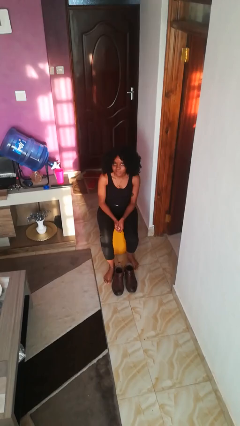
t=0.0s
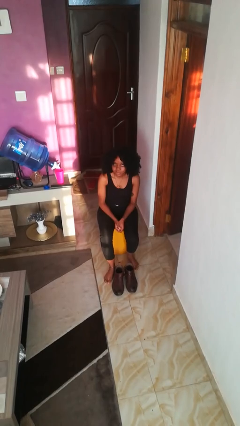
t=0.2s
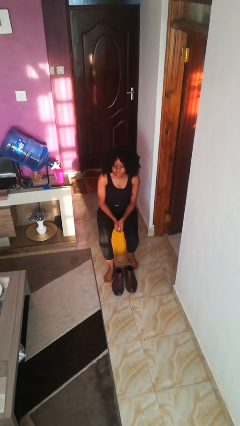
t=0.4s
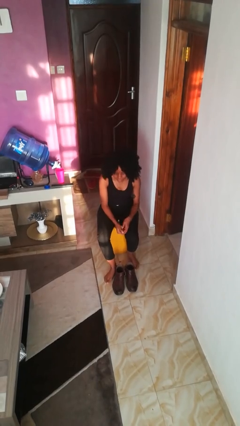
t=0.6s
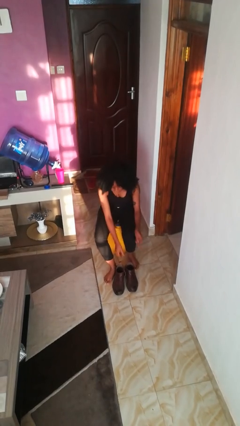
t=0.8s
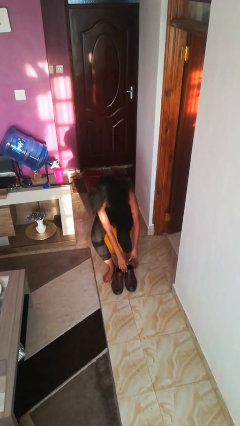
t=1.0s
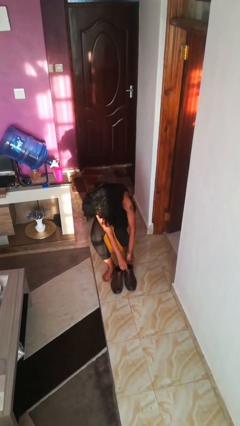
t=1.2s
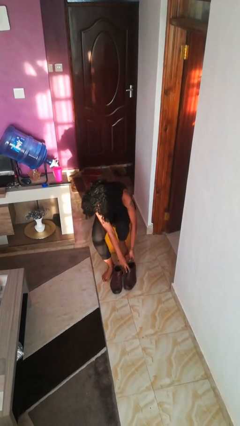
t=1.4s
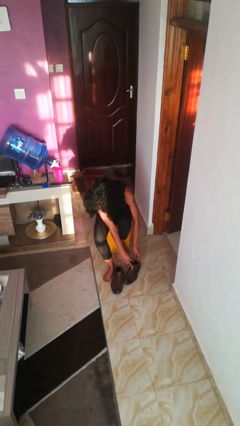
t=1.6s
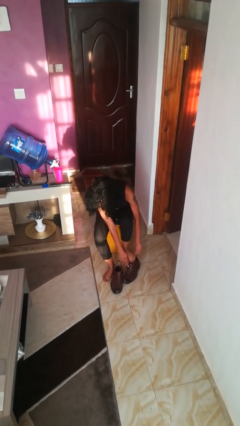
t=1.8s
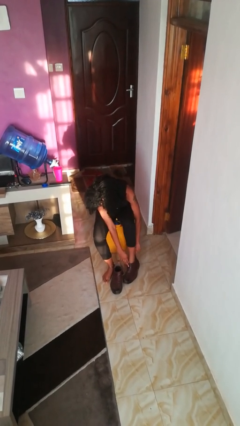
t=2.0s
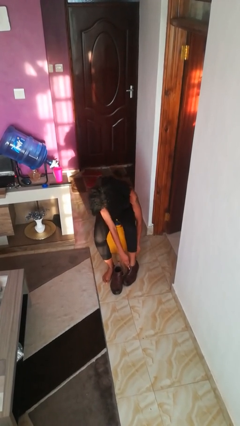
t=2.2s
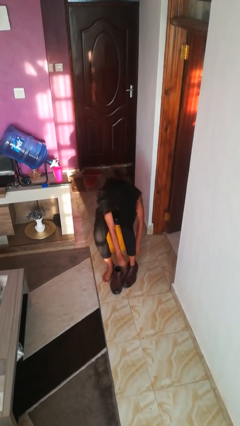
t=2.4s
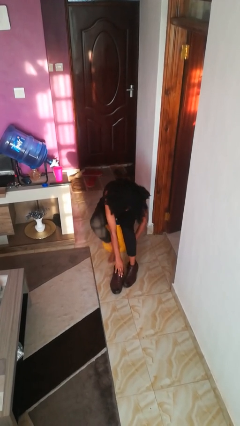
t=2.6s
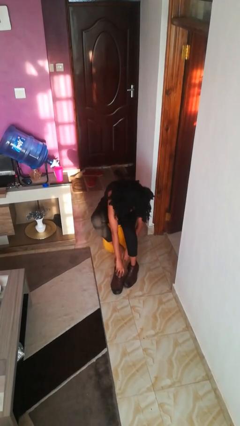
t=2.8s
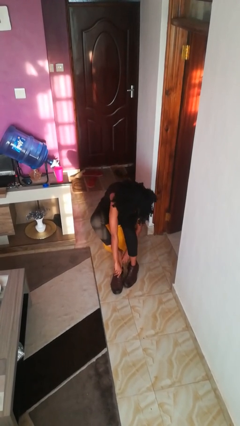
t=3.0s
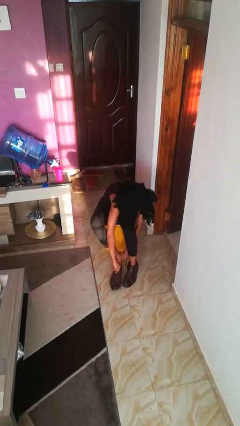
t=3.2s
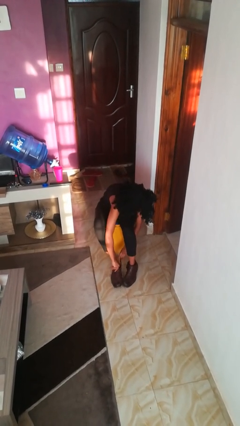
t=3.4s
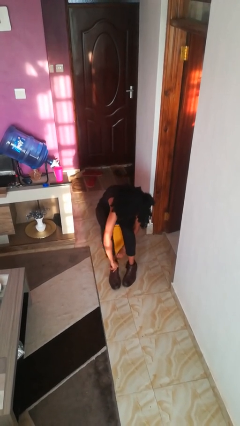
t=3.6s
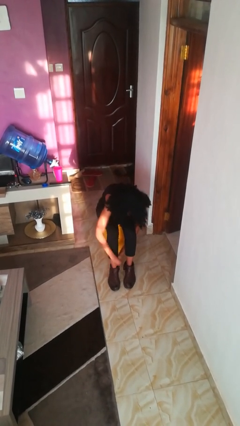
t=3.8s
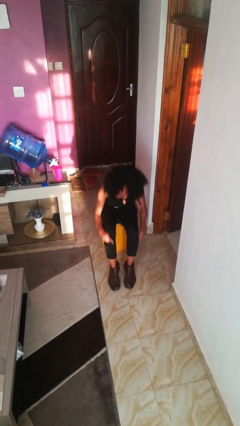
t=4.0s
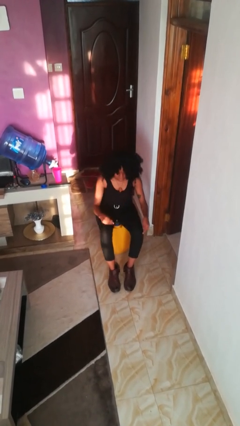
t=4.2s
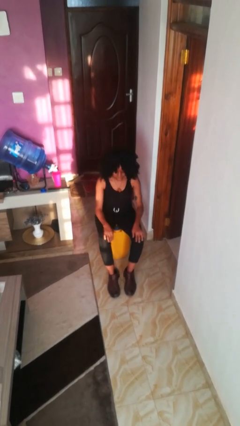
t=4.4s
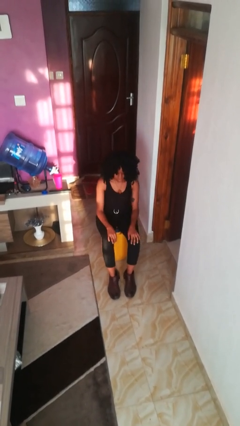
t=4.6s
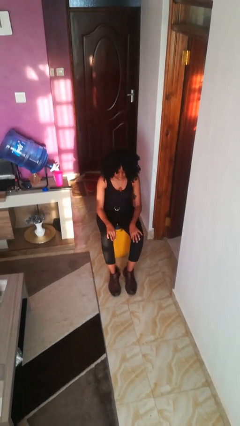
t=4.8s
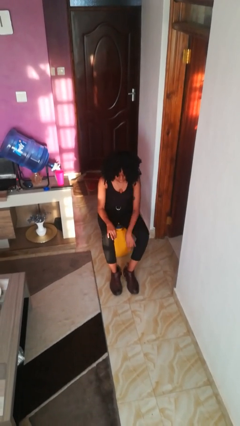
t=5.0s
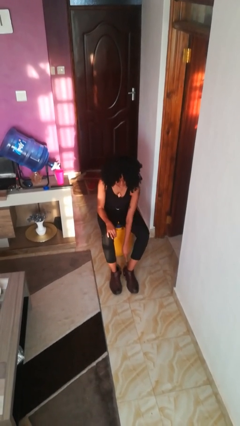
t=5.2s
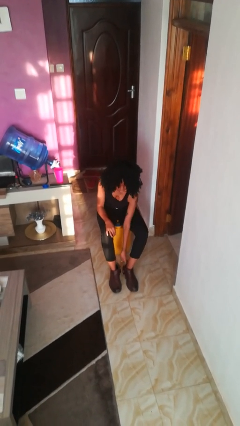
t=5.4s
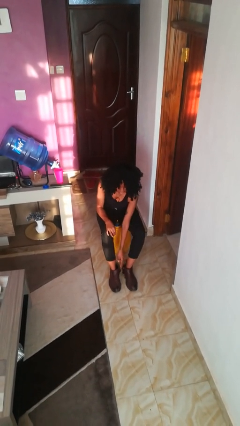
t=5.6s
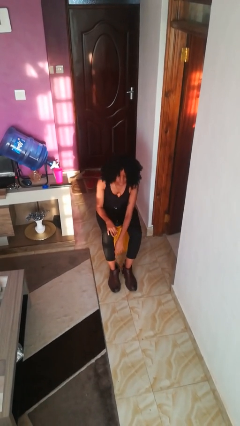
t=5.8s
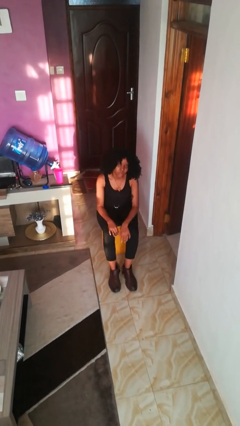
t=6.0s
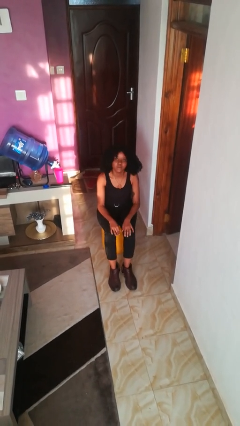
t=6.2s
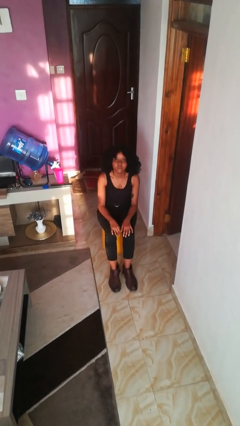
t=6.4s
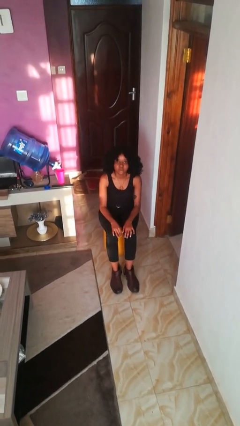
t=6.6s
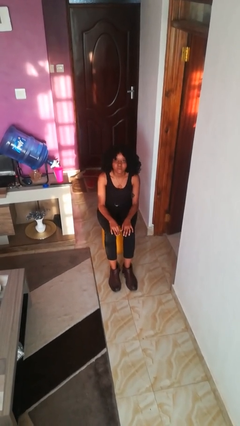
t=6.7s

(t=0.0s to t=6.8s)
person puts on boots

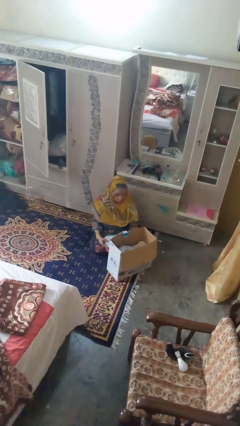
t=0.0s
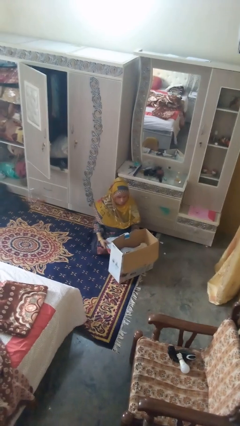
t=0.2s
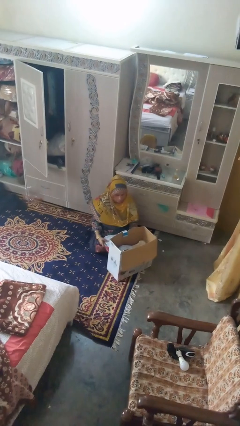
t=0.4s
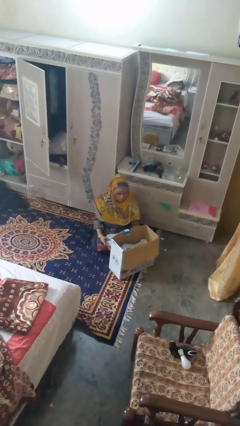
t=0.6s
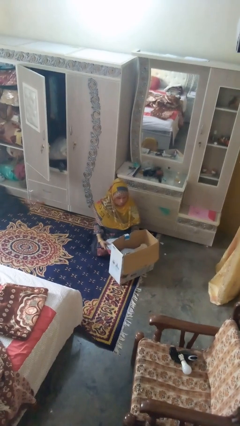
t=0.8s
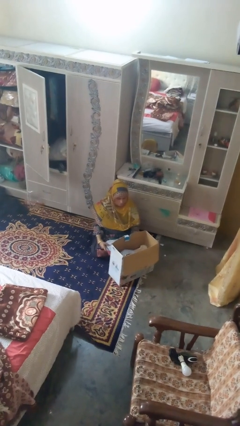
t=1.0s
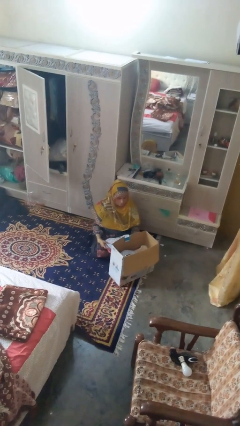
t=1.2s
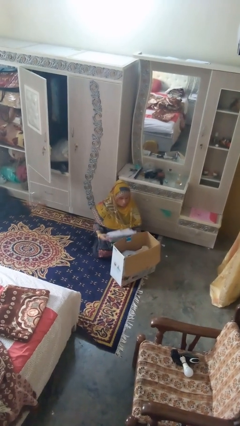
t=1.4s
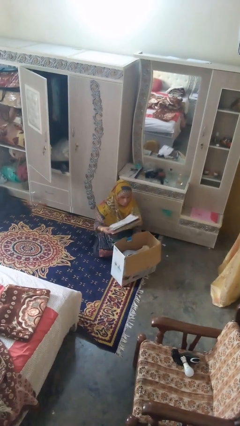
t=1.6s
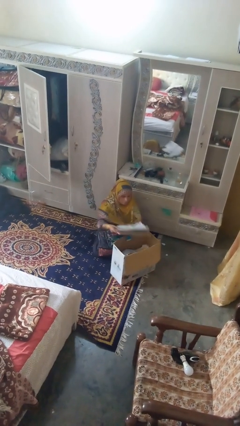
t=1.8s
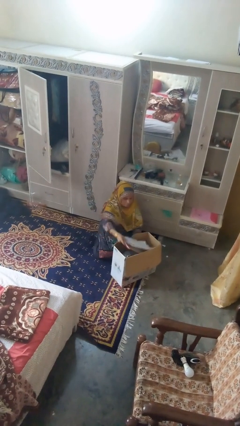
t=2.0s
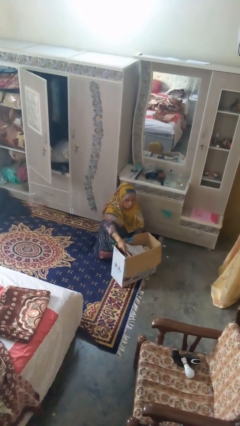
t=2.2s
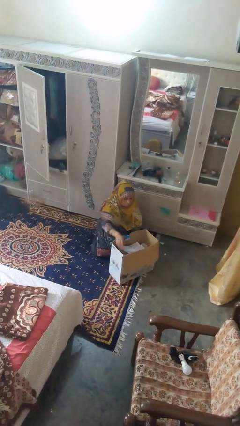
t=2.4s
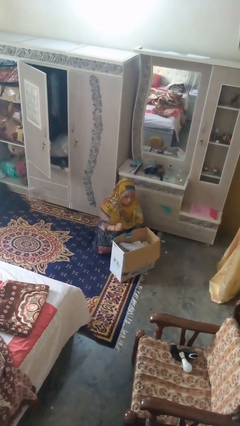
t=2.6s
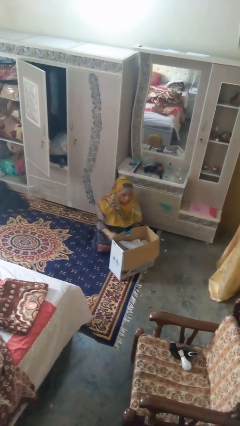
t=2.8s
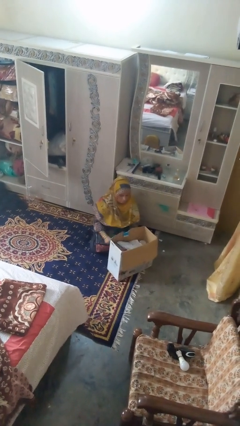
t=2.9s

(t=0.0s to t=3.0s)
person puts object into box

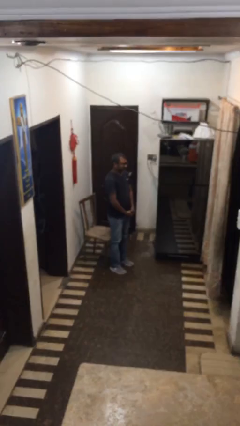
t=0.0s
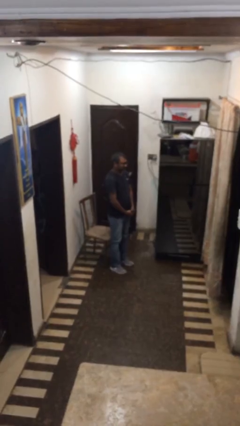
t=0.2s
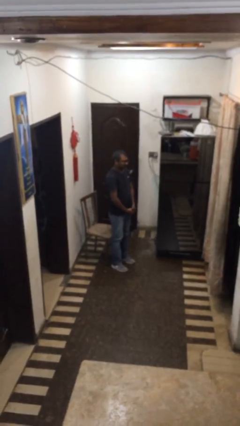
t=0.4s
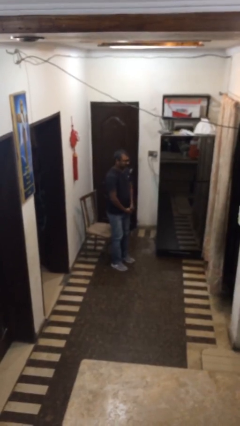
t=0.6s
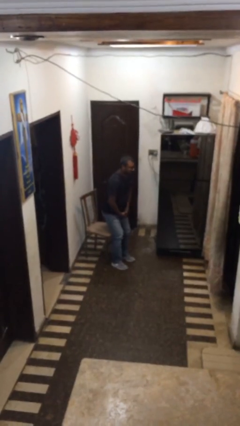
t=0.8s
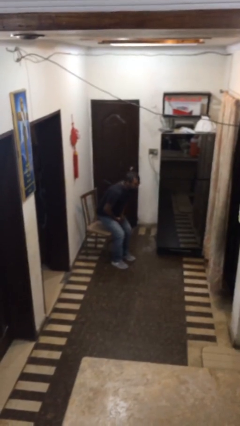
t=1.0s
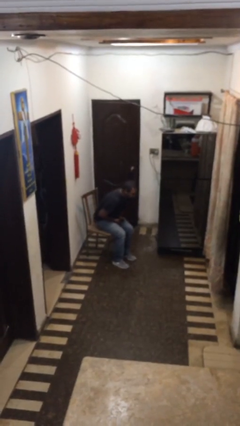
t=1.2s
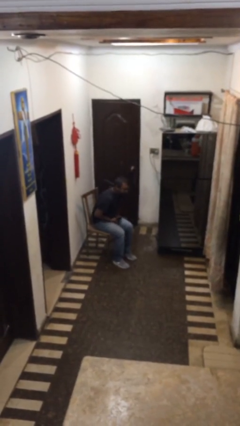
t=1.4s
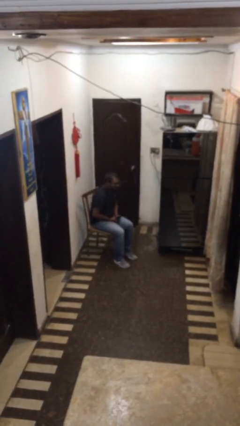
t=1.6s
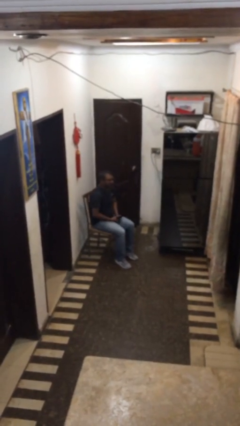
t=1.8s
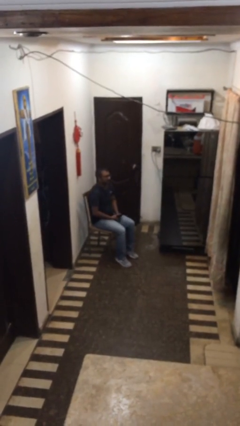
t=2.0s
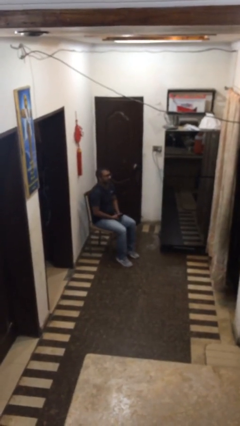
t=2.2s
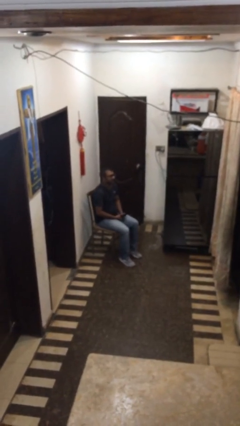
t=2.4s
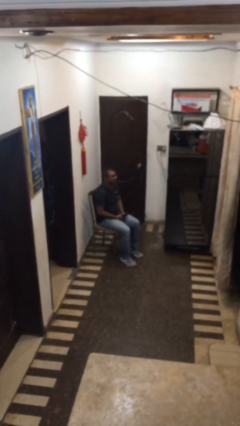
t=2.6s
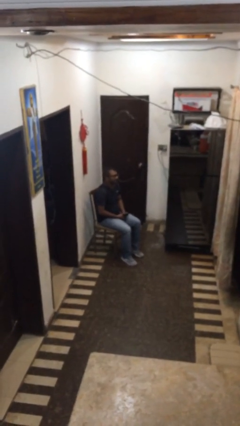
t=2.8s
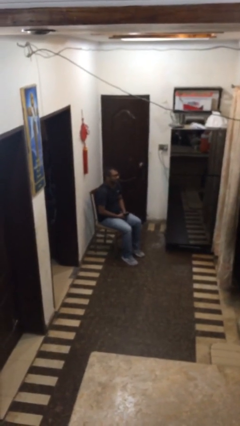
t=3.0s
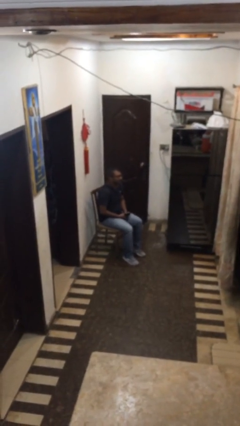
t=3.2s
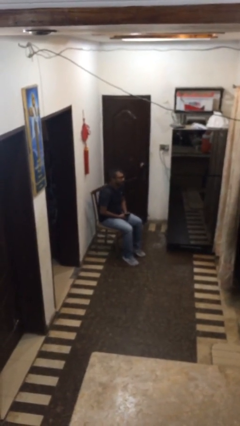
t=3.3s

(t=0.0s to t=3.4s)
person sits down

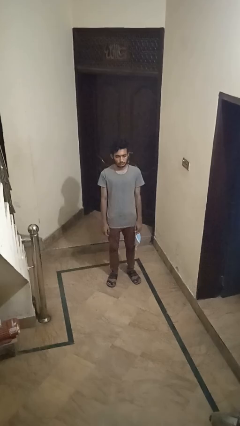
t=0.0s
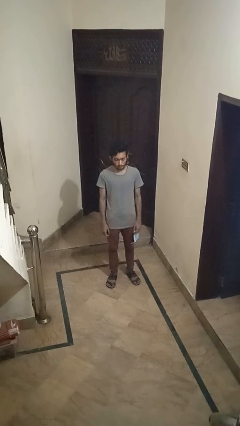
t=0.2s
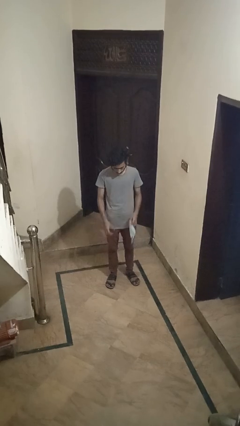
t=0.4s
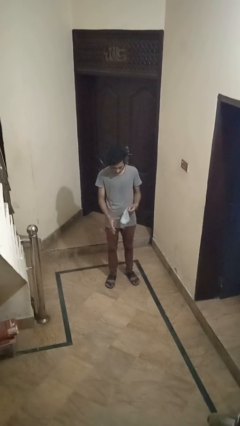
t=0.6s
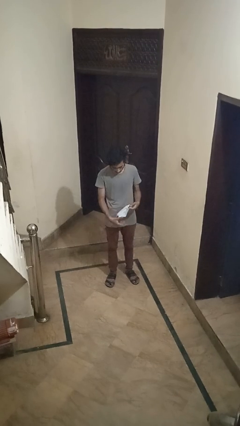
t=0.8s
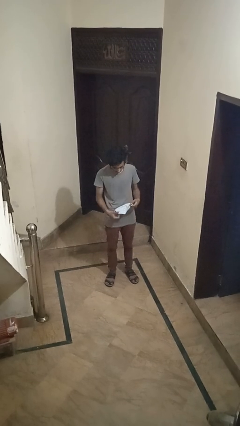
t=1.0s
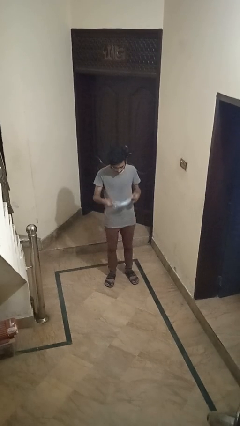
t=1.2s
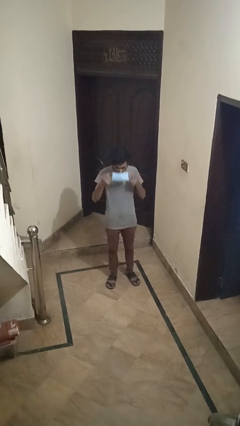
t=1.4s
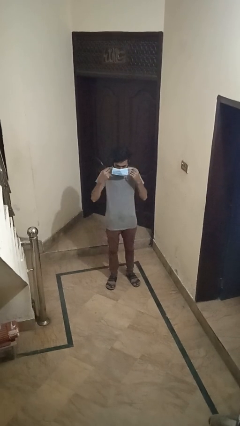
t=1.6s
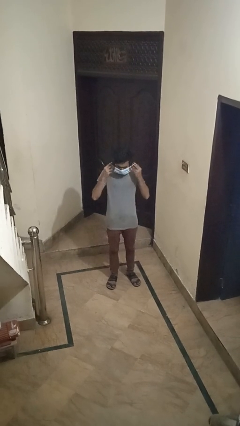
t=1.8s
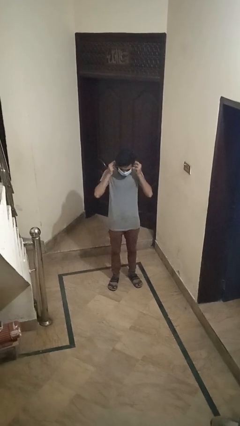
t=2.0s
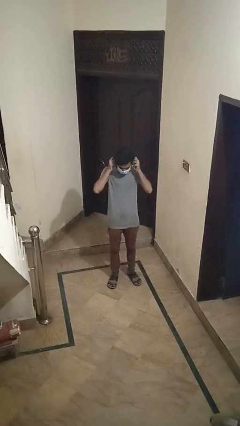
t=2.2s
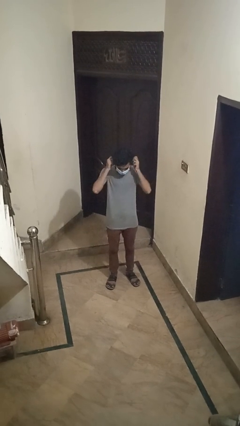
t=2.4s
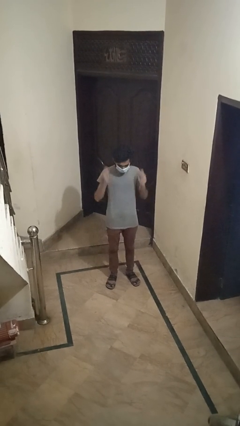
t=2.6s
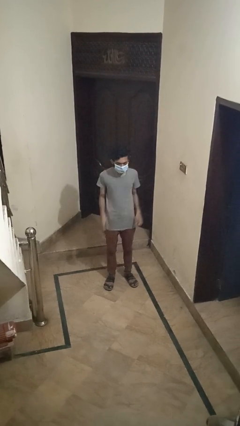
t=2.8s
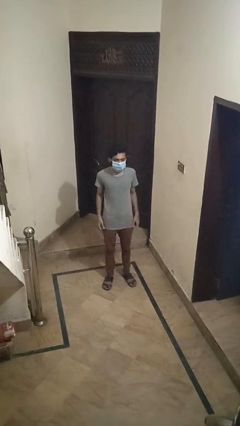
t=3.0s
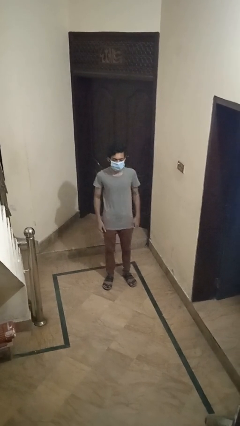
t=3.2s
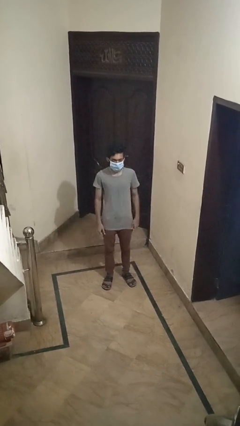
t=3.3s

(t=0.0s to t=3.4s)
person puts on facemask

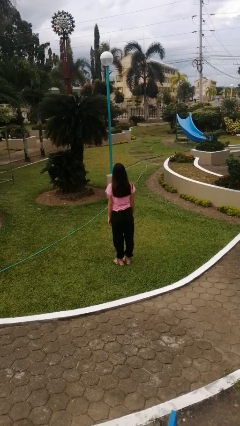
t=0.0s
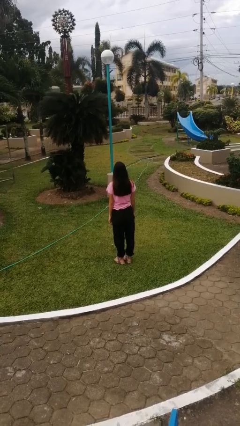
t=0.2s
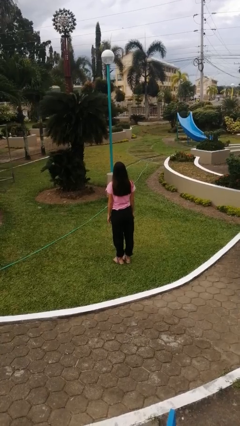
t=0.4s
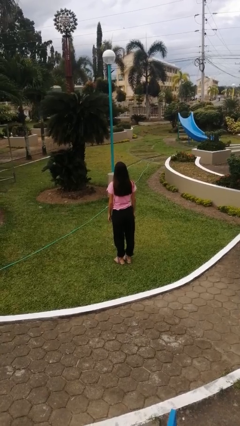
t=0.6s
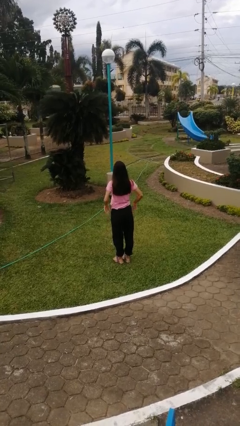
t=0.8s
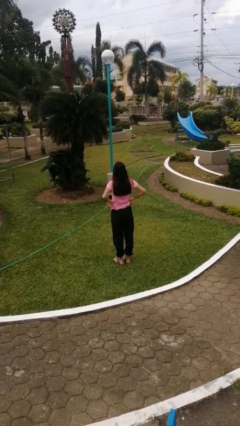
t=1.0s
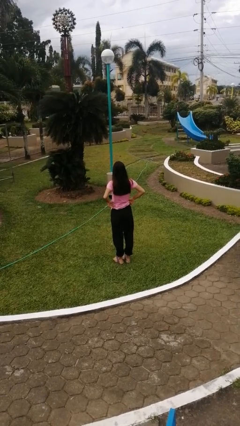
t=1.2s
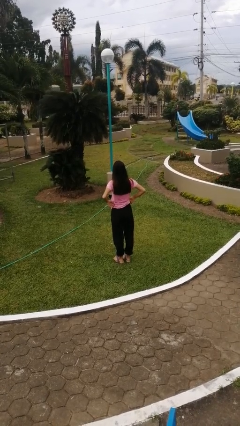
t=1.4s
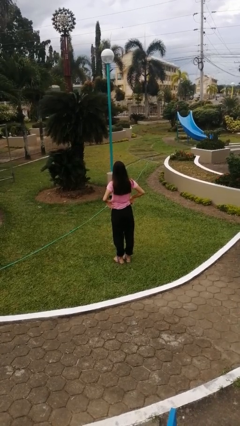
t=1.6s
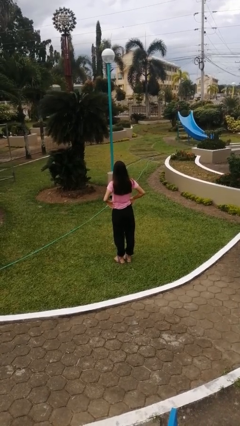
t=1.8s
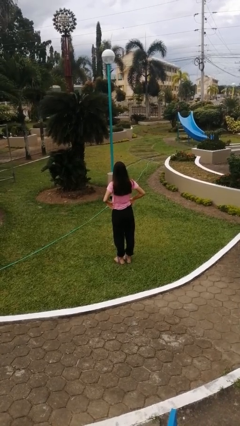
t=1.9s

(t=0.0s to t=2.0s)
person hikes up pants
